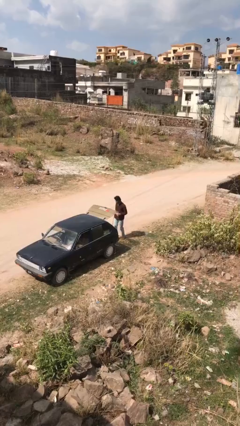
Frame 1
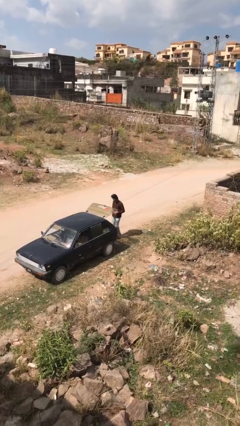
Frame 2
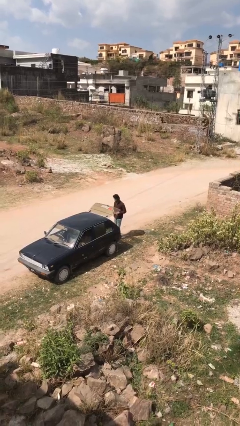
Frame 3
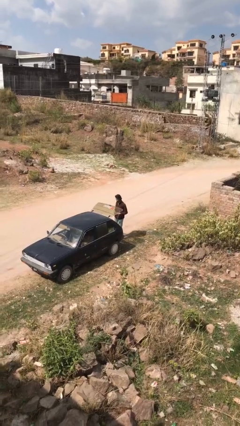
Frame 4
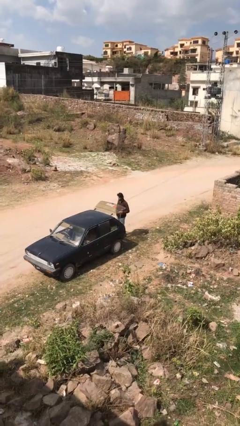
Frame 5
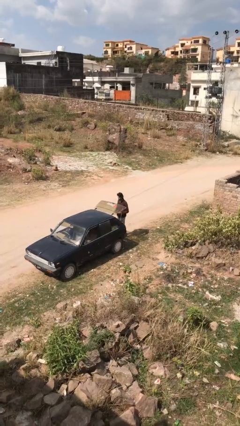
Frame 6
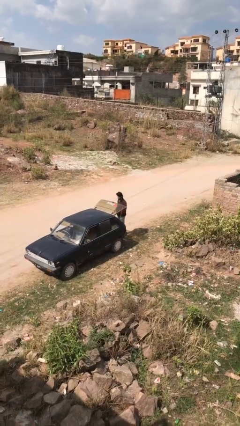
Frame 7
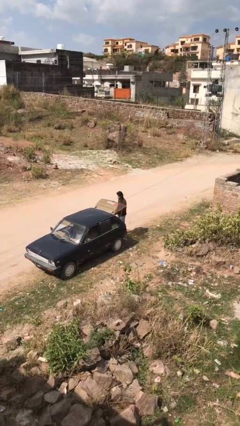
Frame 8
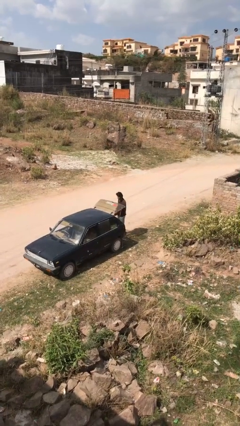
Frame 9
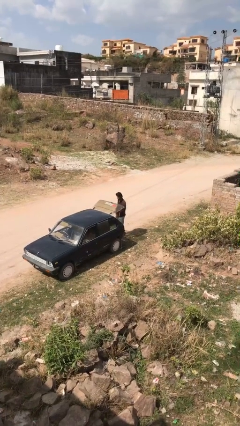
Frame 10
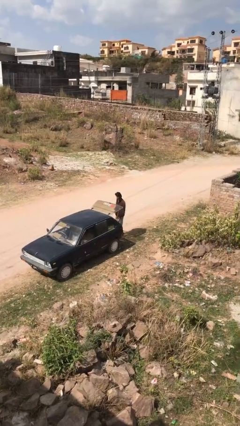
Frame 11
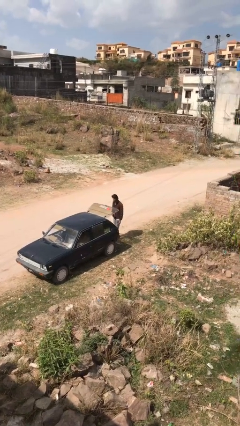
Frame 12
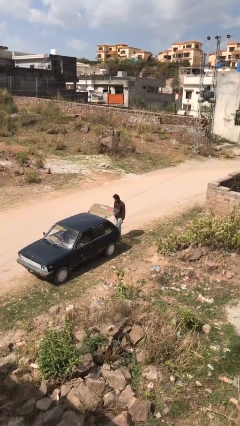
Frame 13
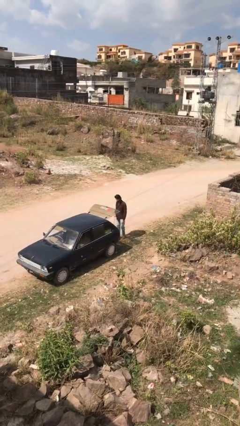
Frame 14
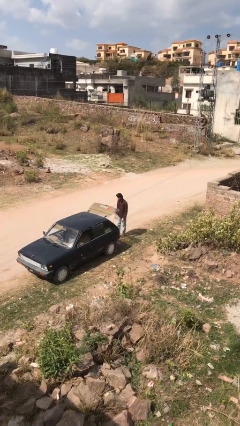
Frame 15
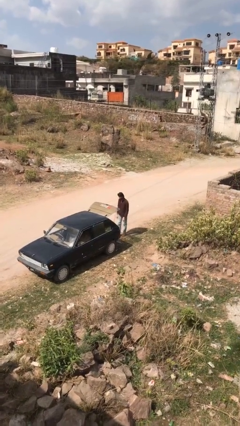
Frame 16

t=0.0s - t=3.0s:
person loads car

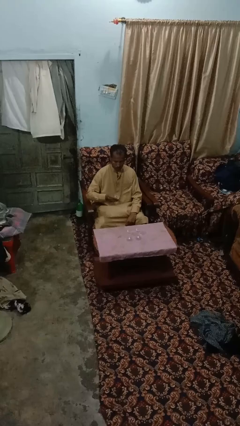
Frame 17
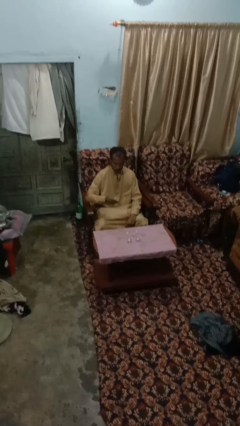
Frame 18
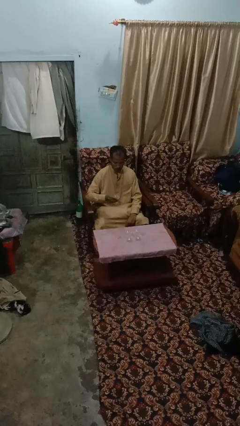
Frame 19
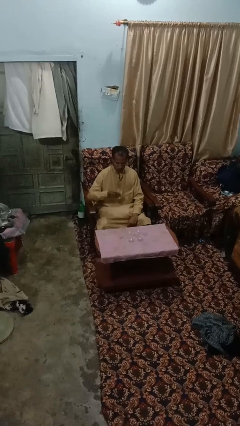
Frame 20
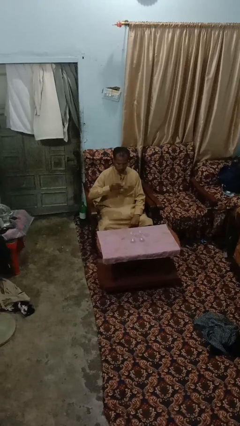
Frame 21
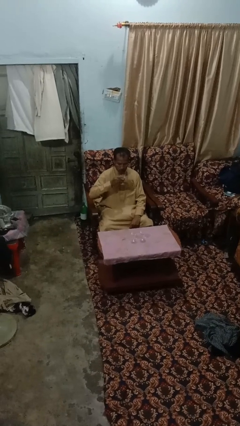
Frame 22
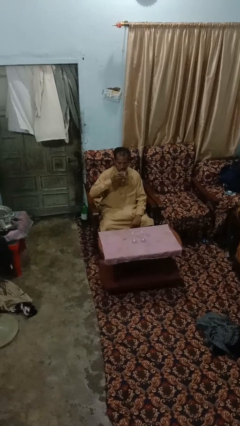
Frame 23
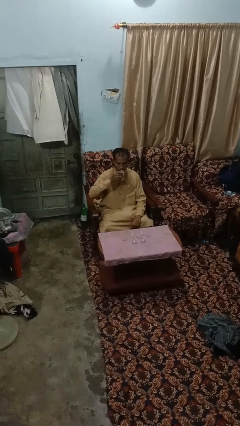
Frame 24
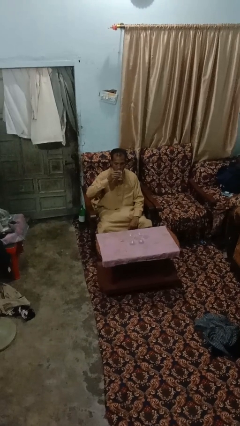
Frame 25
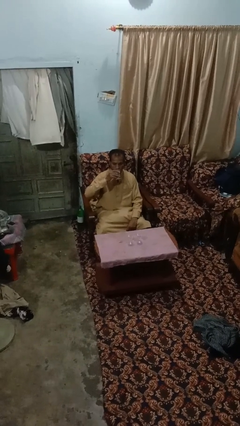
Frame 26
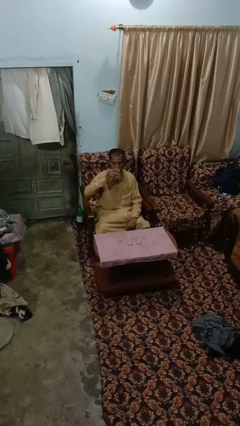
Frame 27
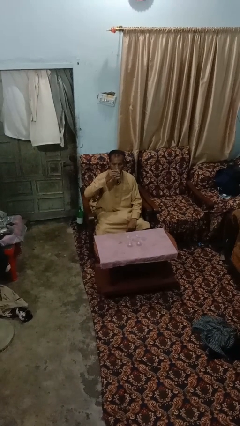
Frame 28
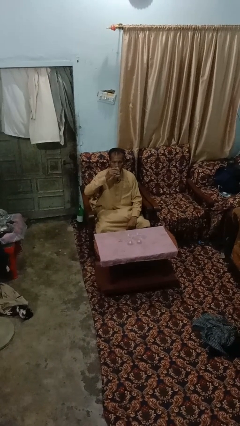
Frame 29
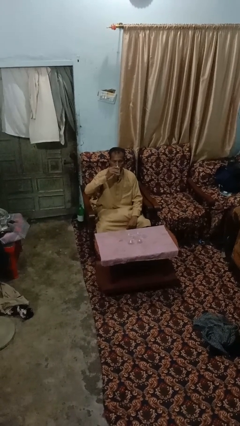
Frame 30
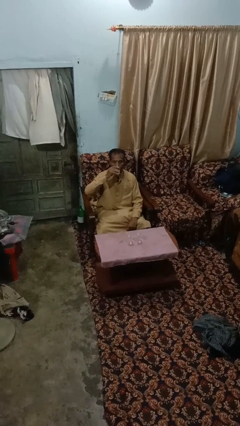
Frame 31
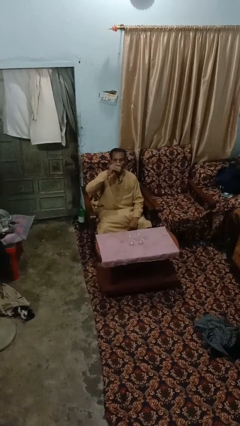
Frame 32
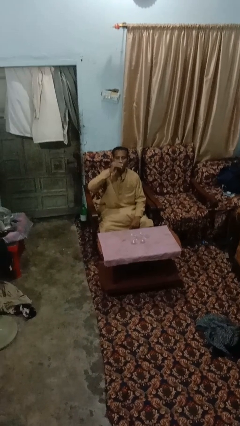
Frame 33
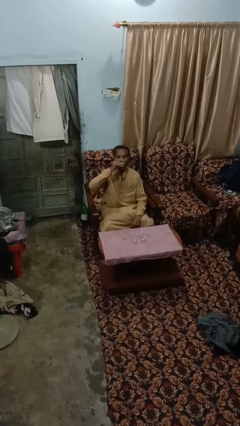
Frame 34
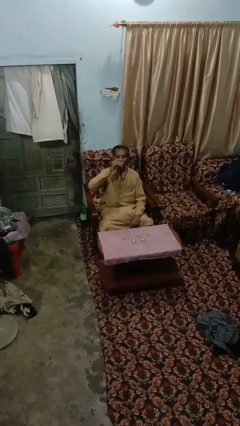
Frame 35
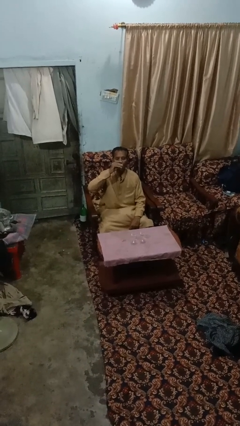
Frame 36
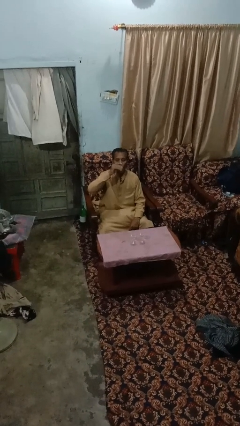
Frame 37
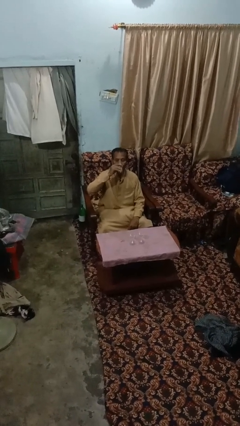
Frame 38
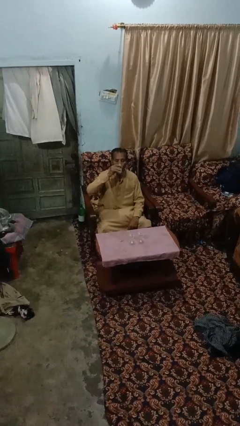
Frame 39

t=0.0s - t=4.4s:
person drinks from shotglass

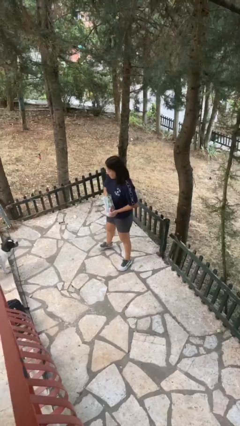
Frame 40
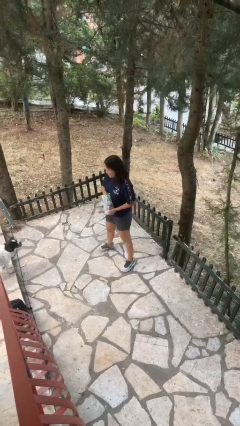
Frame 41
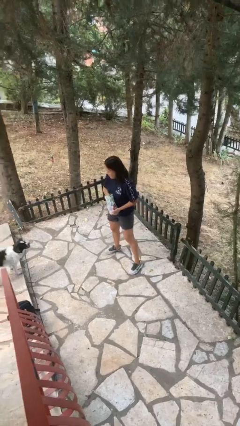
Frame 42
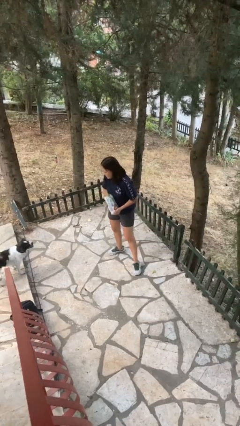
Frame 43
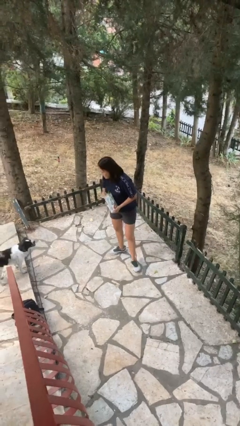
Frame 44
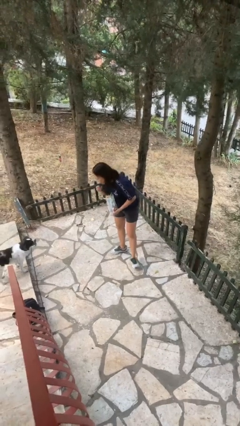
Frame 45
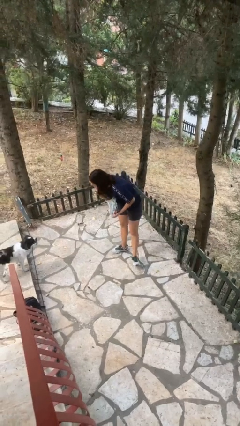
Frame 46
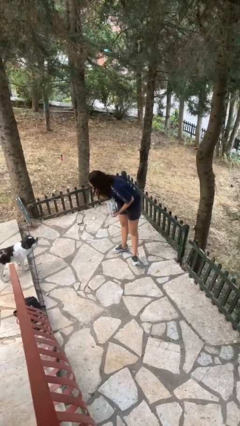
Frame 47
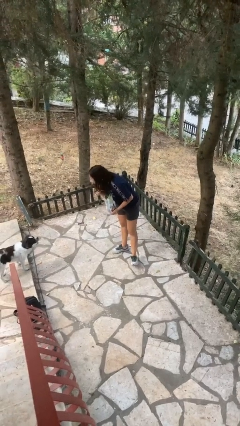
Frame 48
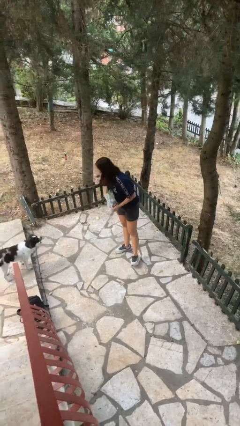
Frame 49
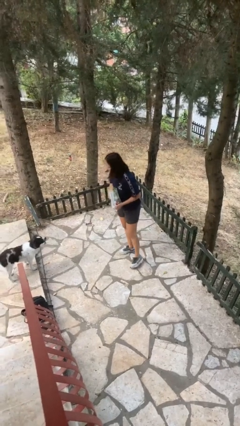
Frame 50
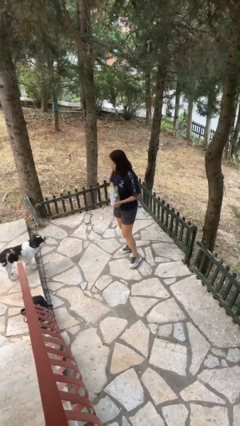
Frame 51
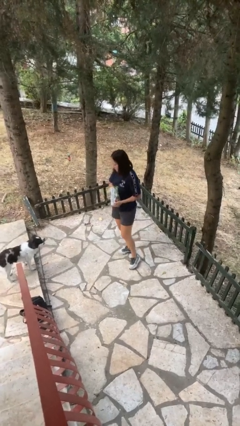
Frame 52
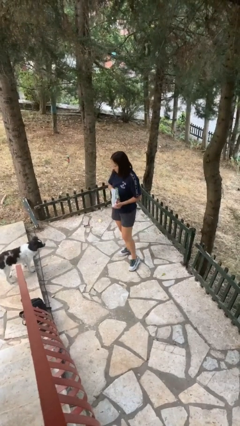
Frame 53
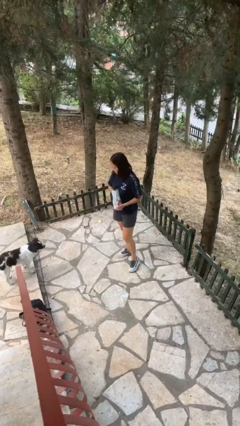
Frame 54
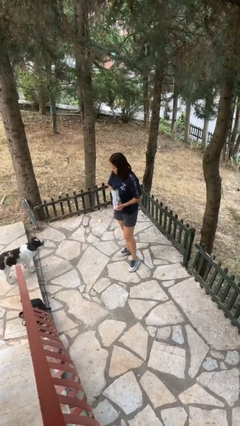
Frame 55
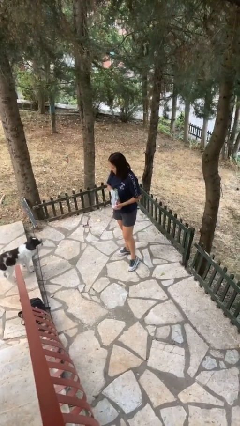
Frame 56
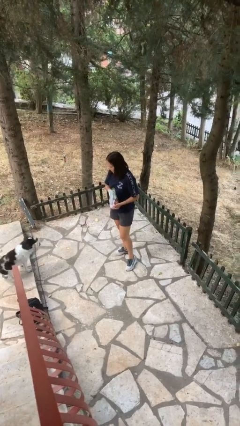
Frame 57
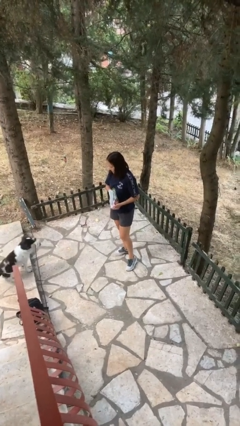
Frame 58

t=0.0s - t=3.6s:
person eats snack from bag

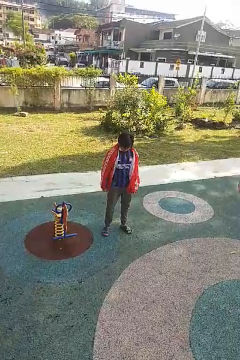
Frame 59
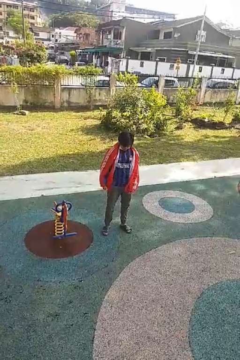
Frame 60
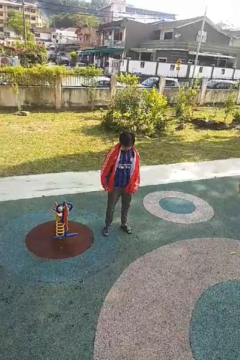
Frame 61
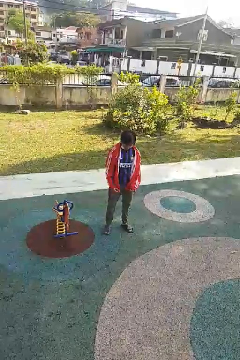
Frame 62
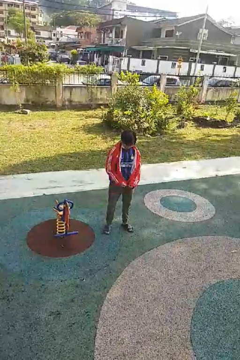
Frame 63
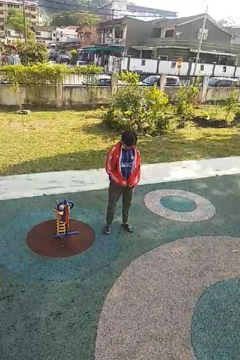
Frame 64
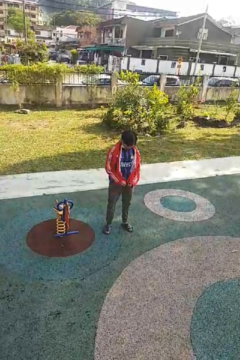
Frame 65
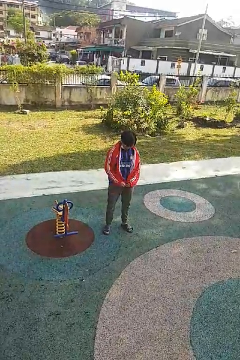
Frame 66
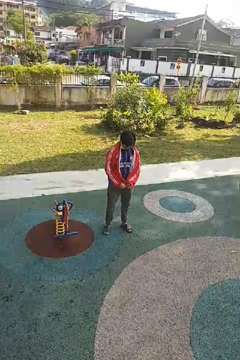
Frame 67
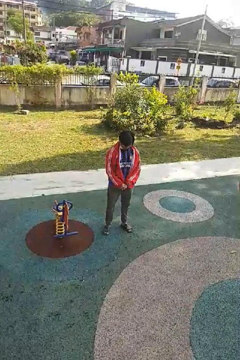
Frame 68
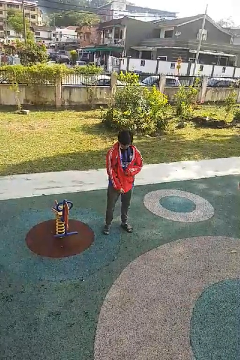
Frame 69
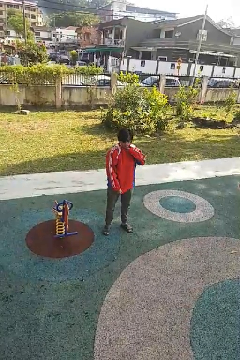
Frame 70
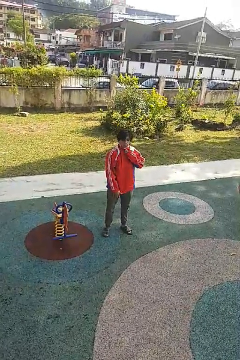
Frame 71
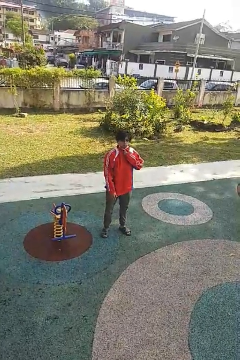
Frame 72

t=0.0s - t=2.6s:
person zips up jacket

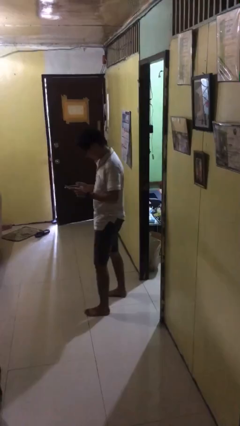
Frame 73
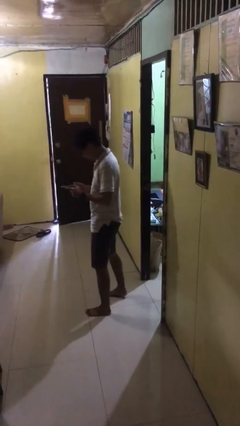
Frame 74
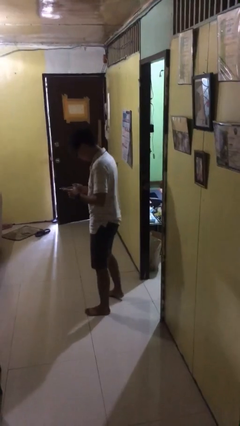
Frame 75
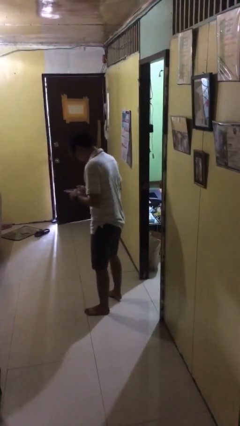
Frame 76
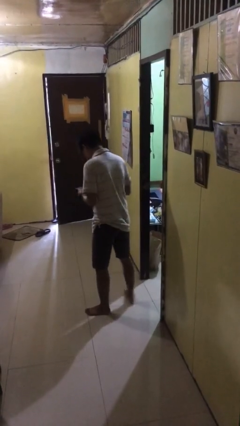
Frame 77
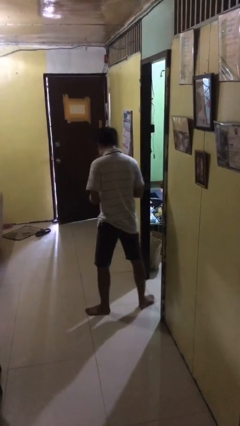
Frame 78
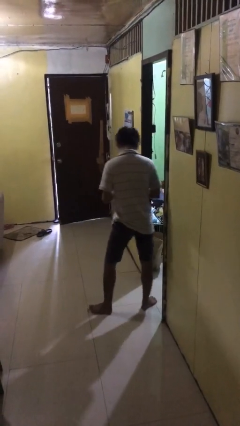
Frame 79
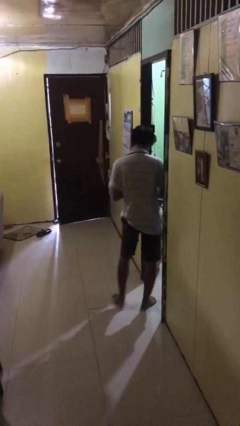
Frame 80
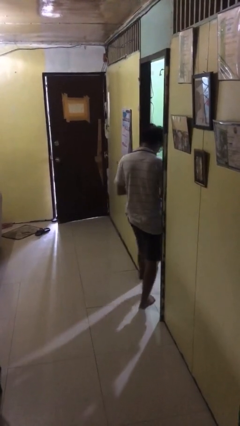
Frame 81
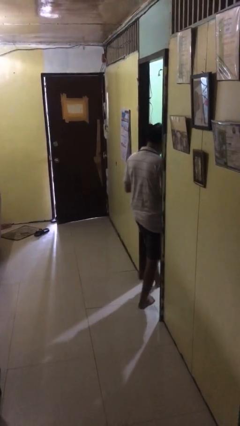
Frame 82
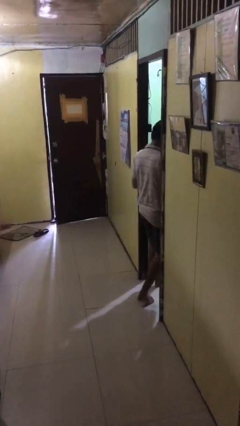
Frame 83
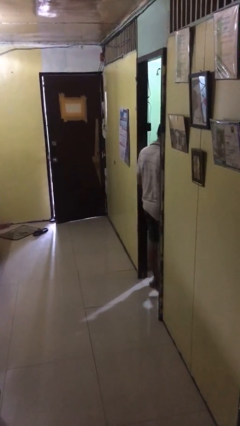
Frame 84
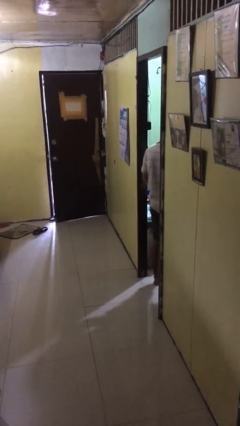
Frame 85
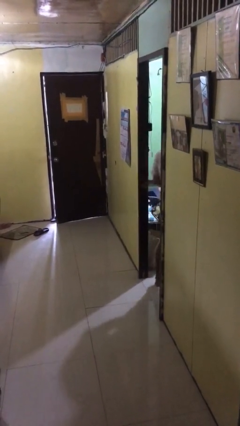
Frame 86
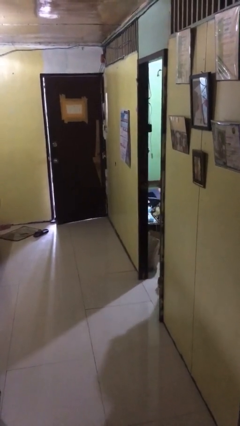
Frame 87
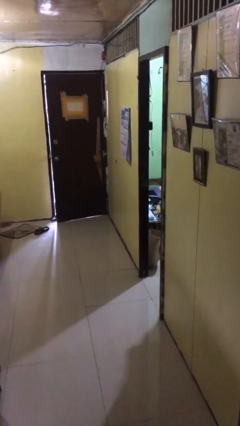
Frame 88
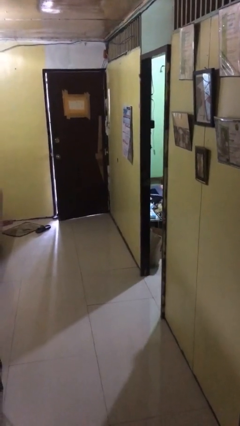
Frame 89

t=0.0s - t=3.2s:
person exits scene through structure

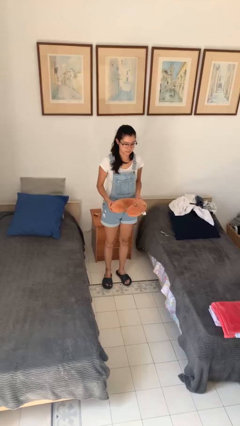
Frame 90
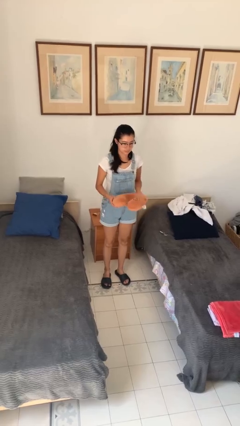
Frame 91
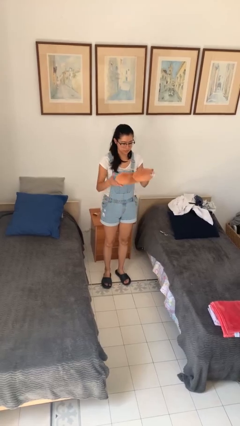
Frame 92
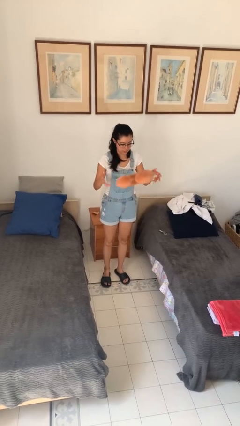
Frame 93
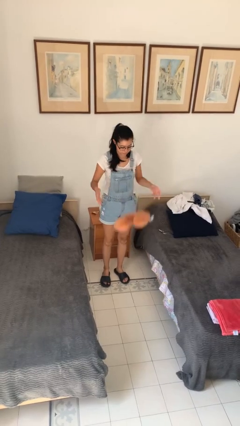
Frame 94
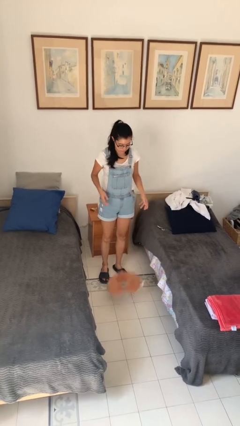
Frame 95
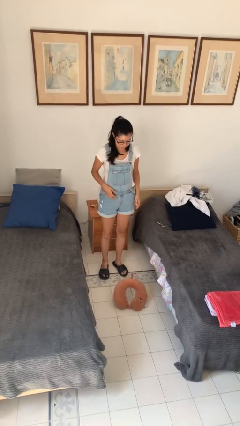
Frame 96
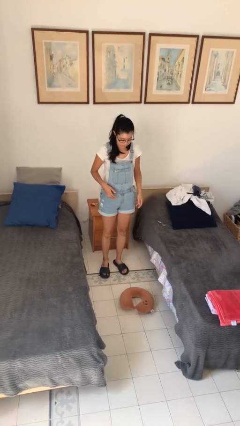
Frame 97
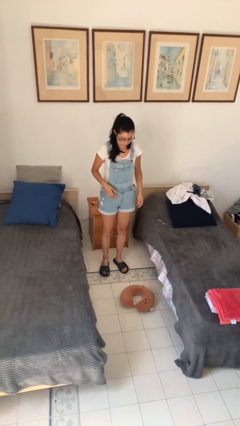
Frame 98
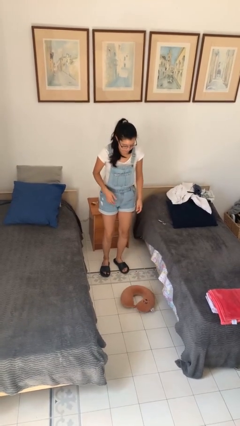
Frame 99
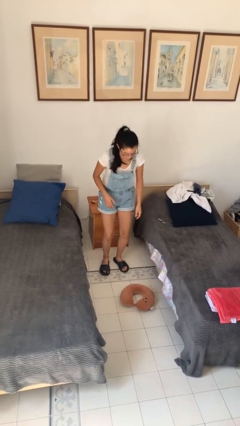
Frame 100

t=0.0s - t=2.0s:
person throws object into air
